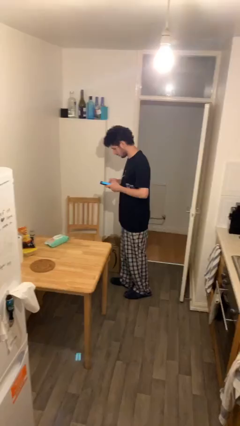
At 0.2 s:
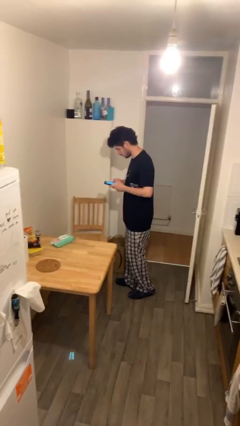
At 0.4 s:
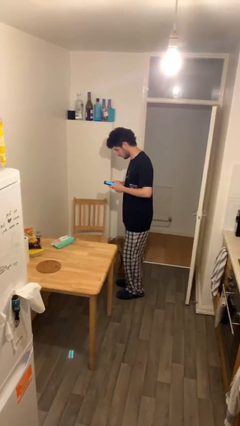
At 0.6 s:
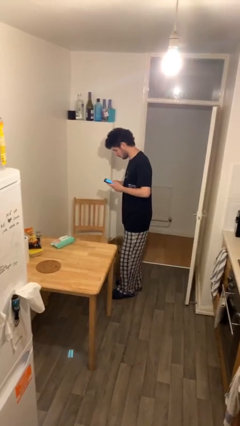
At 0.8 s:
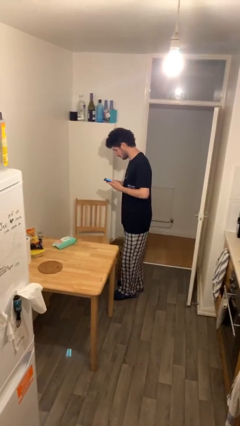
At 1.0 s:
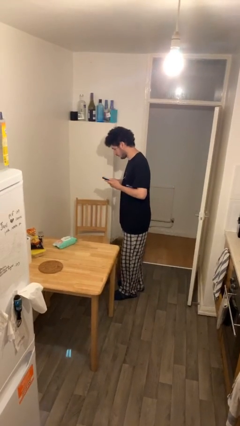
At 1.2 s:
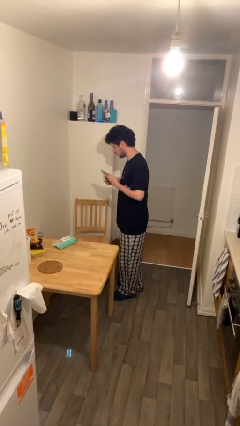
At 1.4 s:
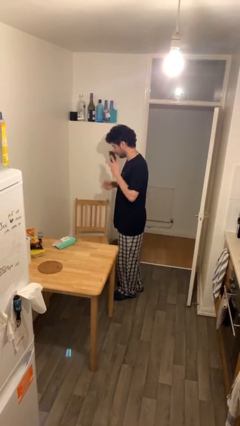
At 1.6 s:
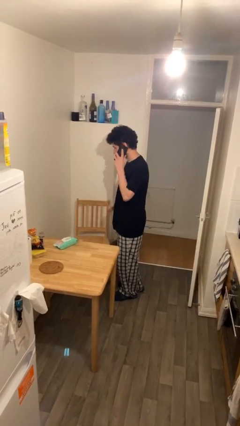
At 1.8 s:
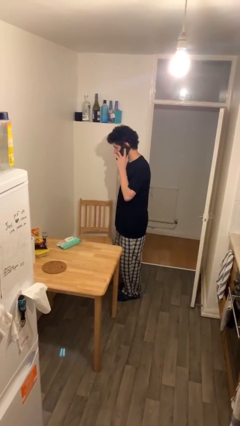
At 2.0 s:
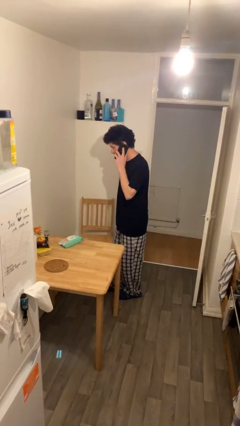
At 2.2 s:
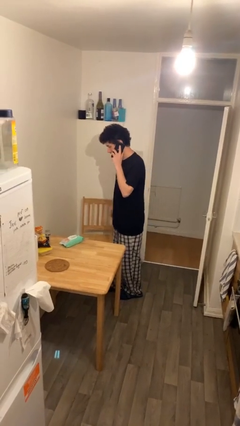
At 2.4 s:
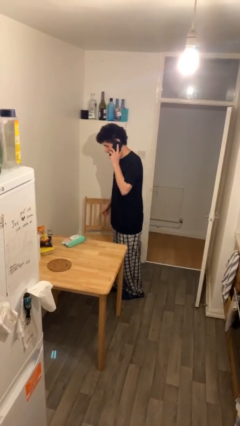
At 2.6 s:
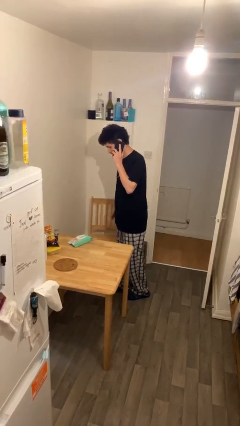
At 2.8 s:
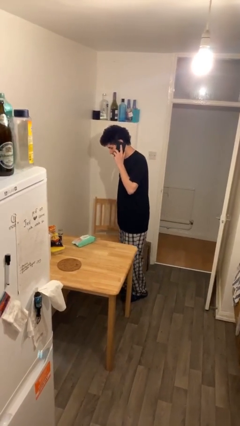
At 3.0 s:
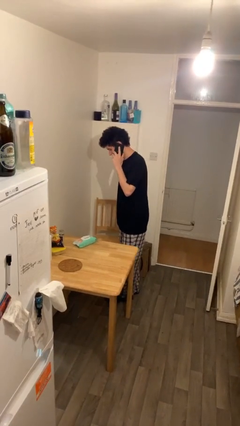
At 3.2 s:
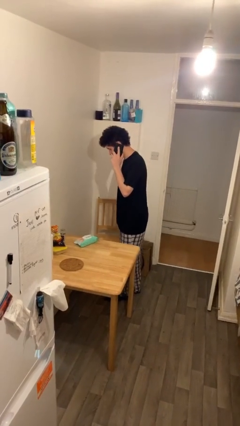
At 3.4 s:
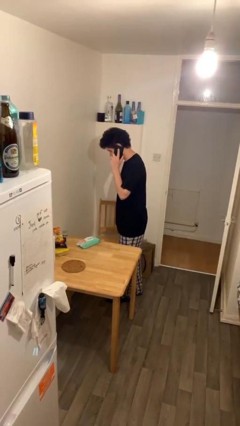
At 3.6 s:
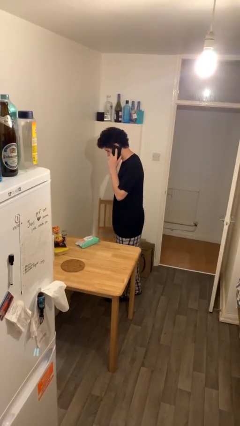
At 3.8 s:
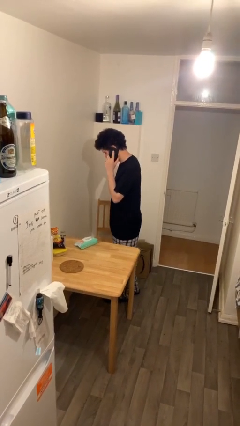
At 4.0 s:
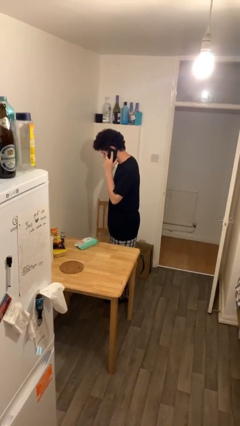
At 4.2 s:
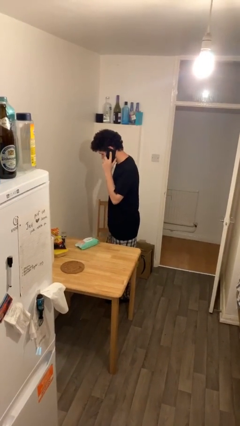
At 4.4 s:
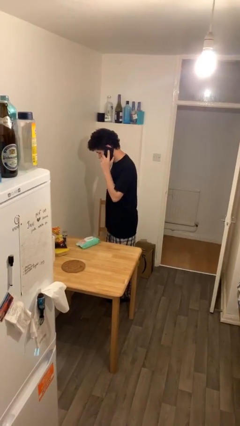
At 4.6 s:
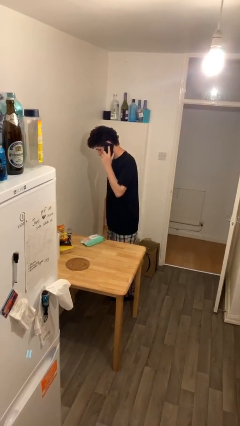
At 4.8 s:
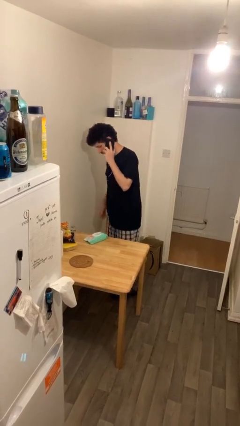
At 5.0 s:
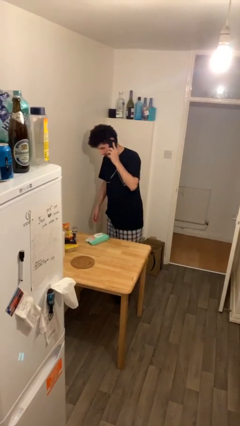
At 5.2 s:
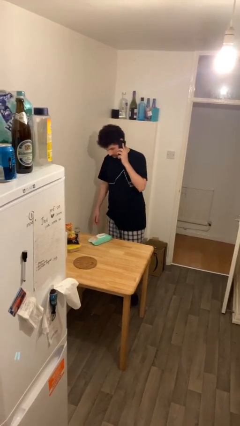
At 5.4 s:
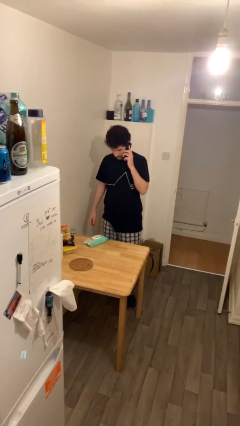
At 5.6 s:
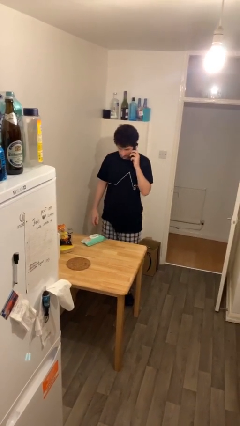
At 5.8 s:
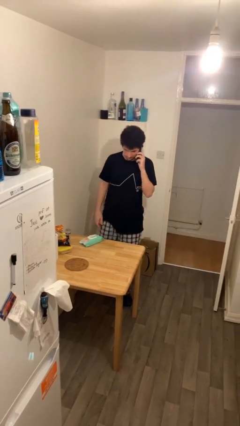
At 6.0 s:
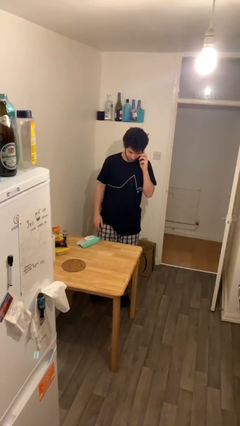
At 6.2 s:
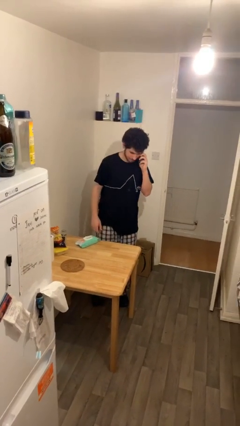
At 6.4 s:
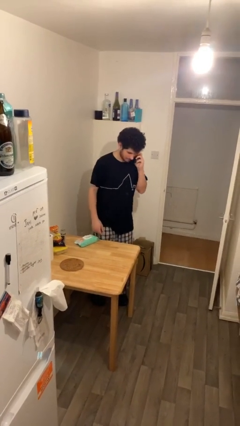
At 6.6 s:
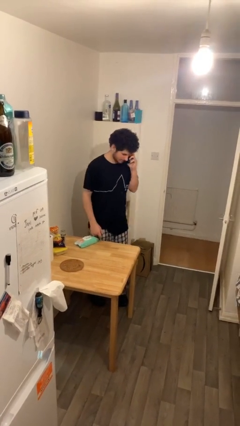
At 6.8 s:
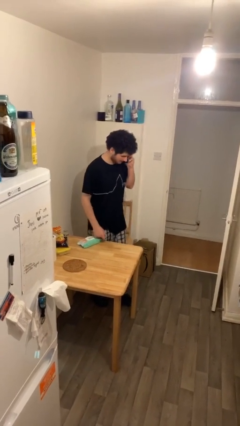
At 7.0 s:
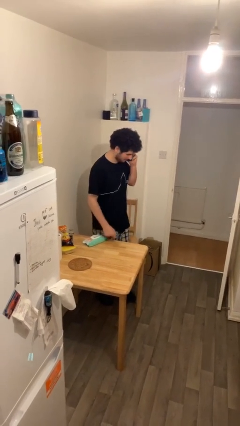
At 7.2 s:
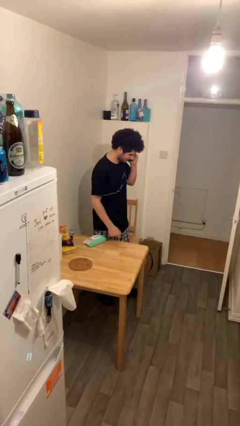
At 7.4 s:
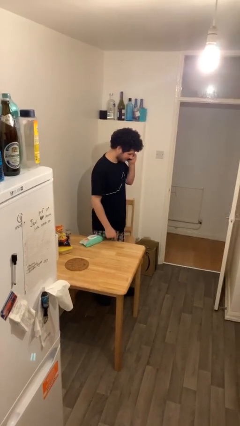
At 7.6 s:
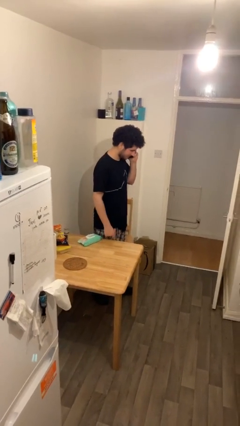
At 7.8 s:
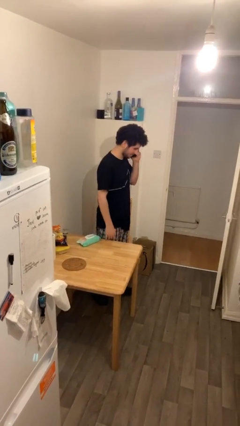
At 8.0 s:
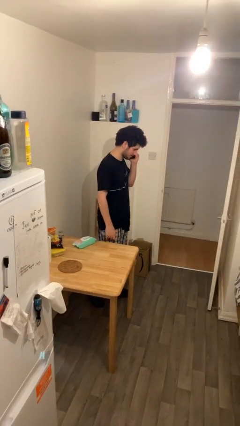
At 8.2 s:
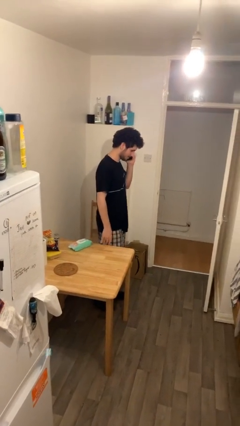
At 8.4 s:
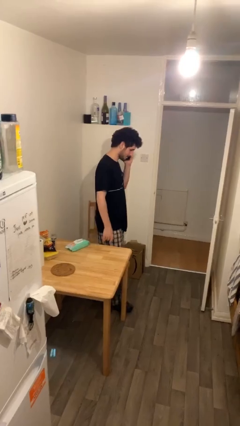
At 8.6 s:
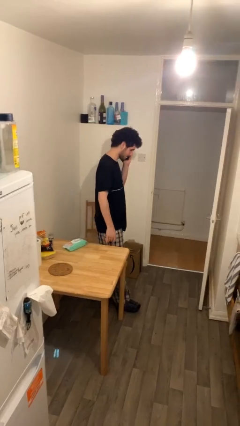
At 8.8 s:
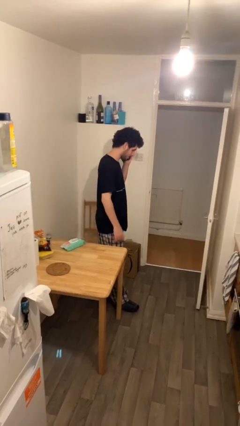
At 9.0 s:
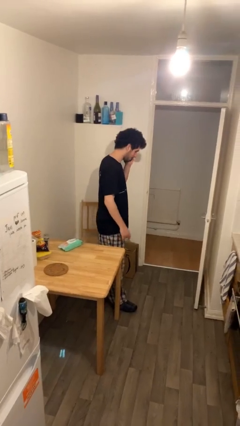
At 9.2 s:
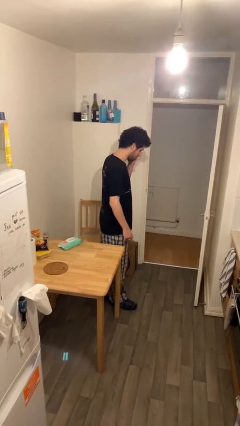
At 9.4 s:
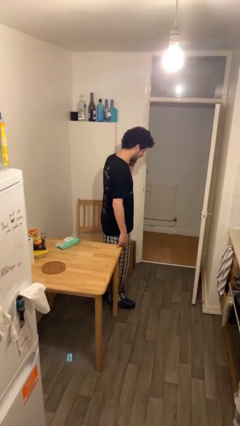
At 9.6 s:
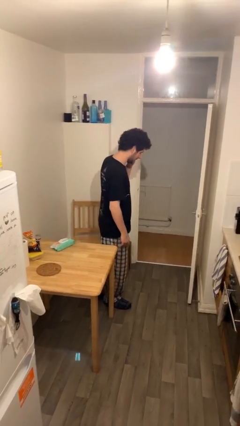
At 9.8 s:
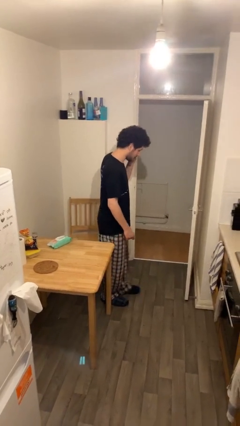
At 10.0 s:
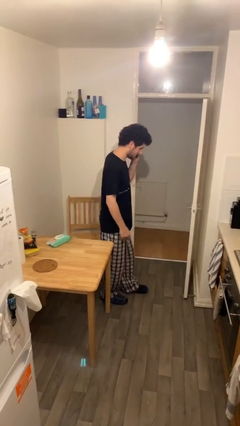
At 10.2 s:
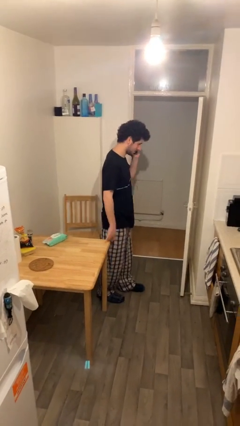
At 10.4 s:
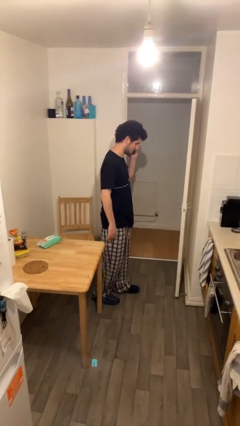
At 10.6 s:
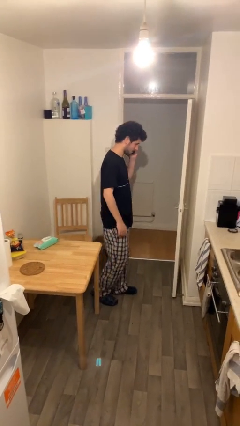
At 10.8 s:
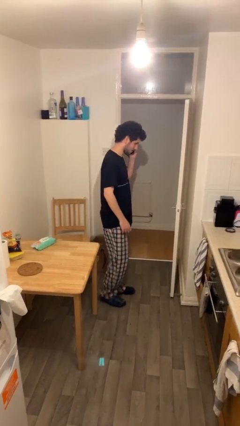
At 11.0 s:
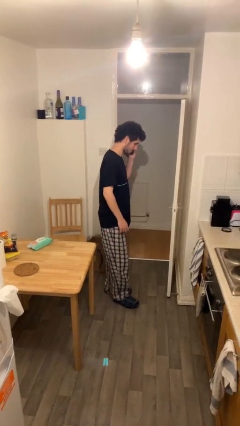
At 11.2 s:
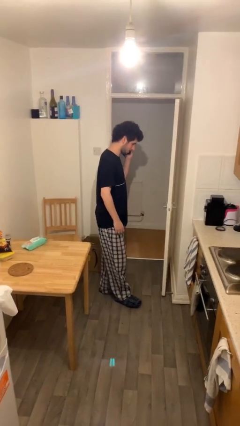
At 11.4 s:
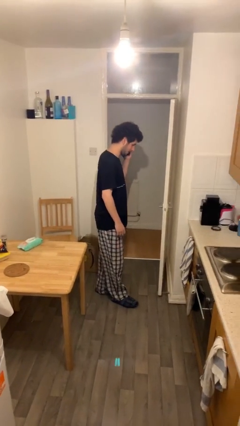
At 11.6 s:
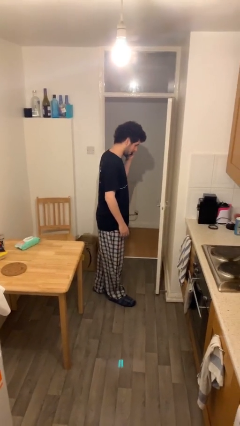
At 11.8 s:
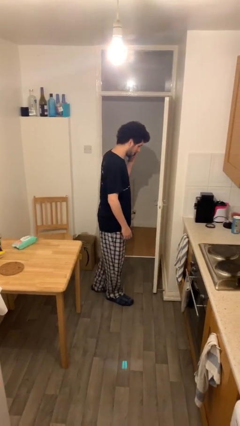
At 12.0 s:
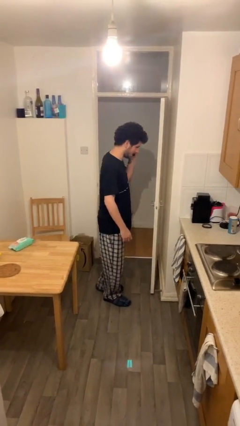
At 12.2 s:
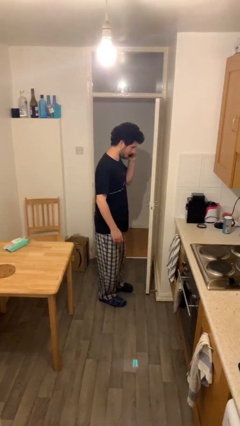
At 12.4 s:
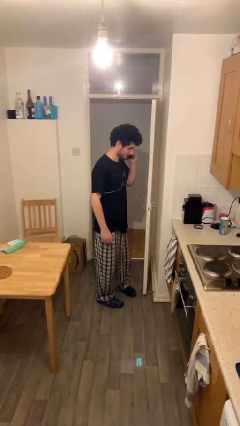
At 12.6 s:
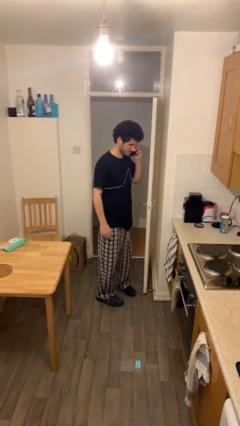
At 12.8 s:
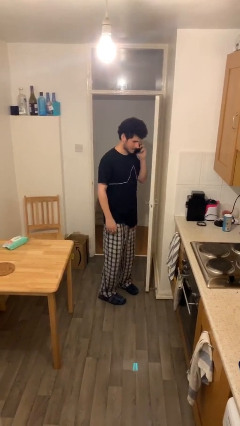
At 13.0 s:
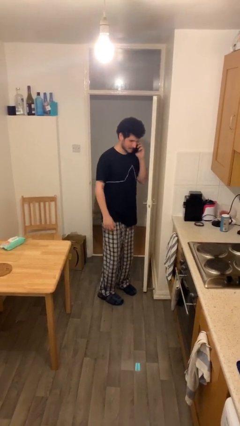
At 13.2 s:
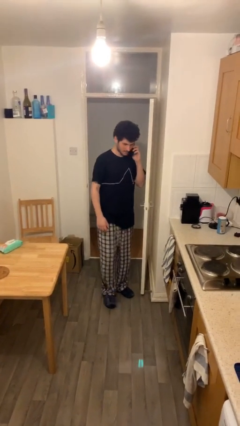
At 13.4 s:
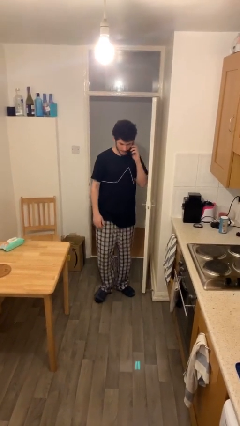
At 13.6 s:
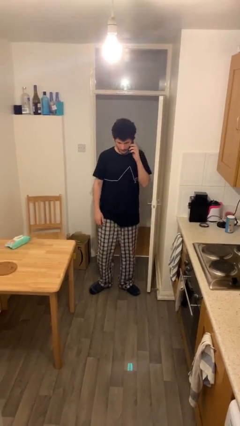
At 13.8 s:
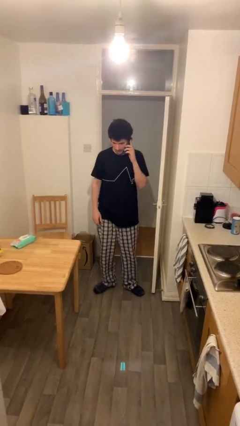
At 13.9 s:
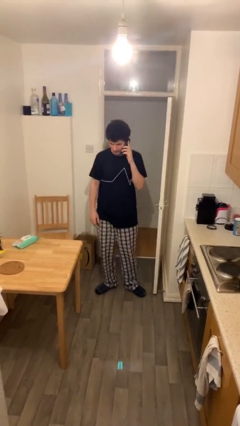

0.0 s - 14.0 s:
person talks on phone

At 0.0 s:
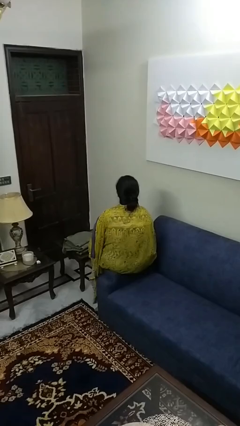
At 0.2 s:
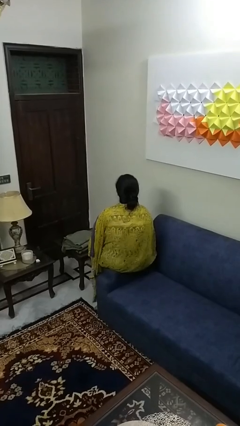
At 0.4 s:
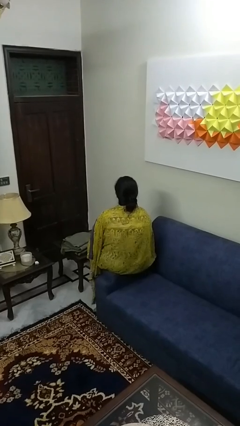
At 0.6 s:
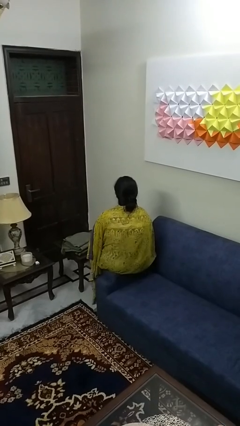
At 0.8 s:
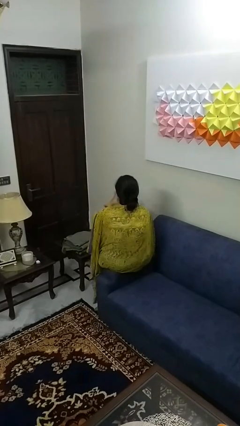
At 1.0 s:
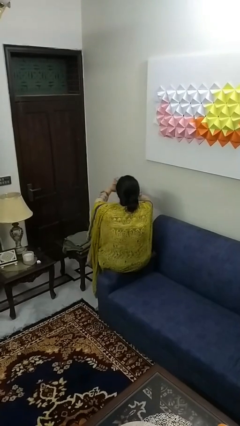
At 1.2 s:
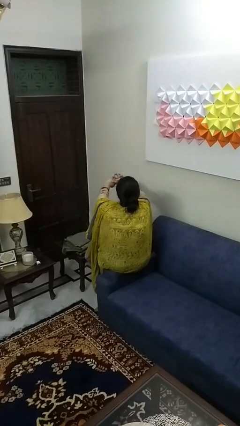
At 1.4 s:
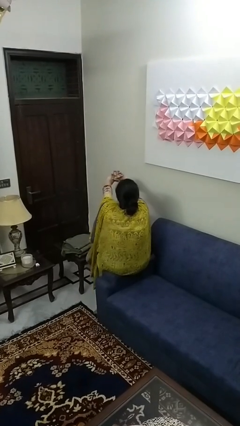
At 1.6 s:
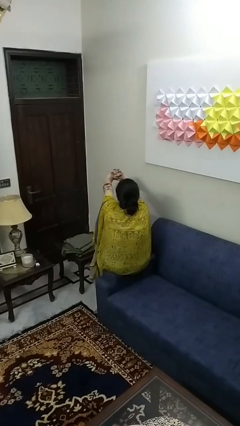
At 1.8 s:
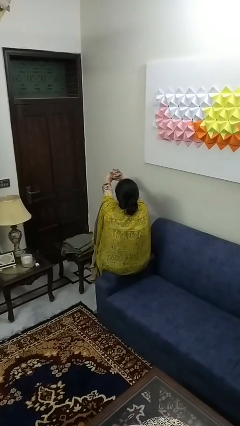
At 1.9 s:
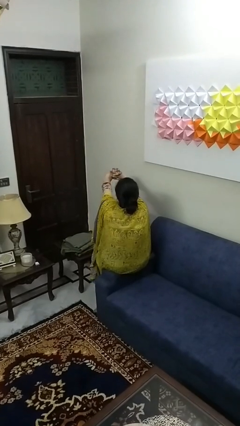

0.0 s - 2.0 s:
person cracks knuckles

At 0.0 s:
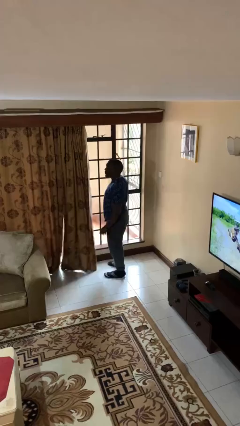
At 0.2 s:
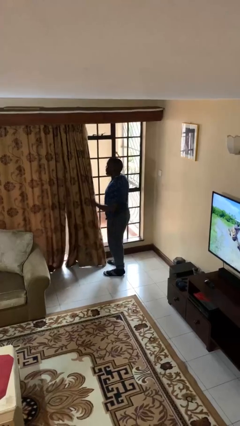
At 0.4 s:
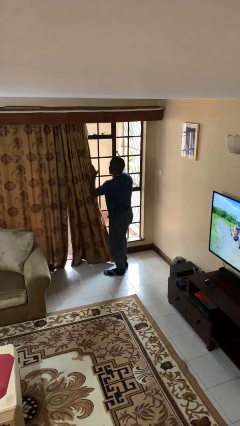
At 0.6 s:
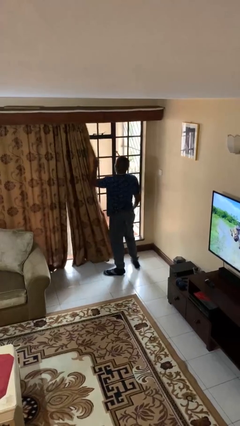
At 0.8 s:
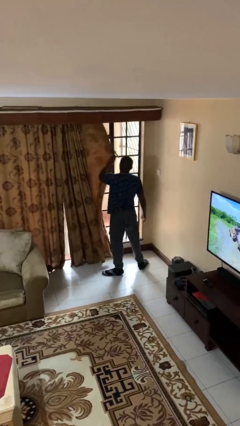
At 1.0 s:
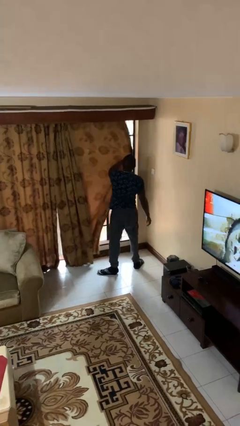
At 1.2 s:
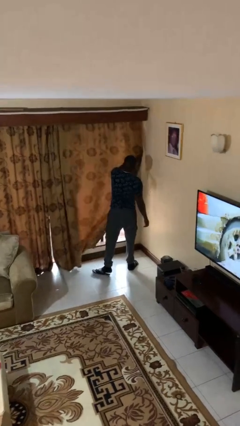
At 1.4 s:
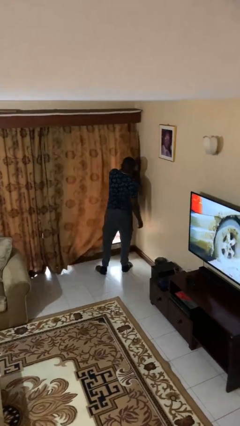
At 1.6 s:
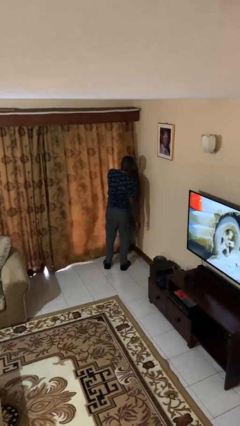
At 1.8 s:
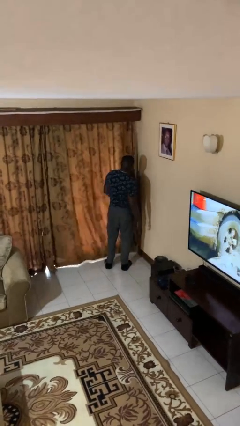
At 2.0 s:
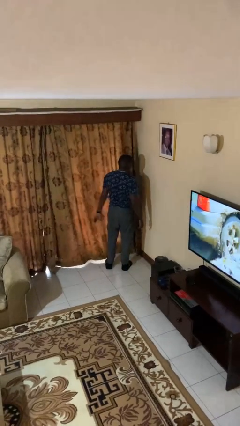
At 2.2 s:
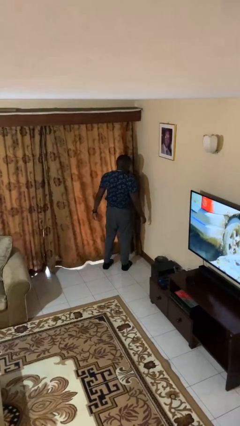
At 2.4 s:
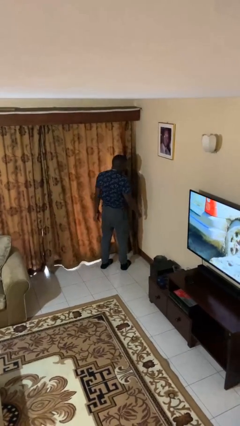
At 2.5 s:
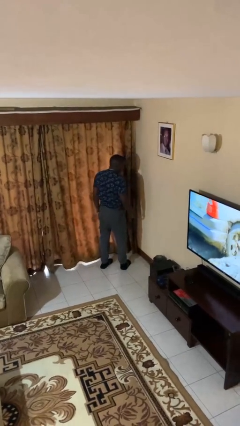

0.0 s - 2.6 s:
person closes curtains
